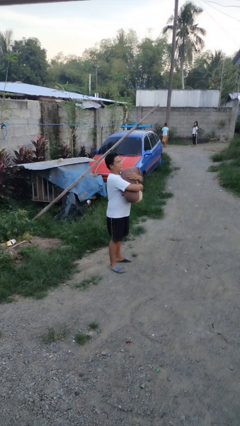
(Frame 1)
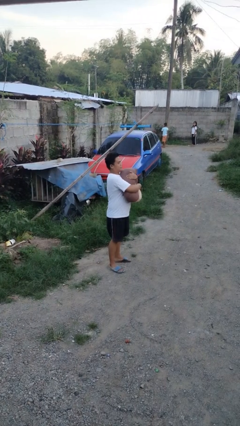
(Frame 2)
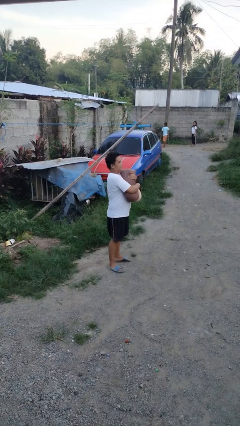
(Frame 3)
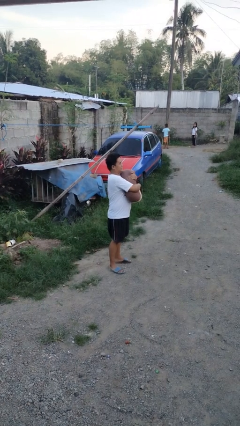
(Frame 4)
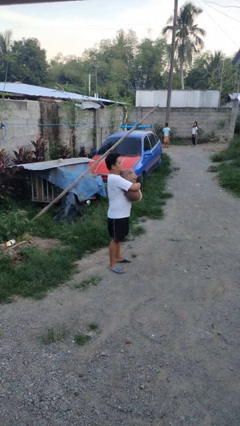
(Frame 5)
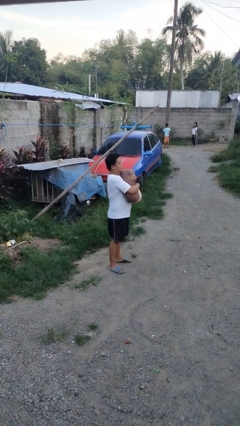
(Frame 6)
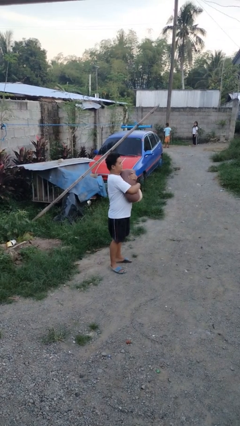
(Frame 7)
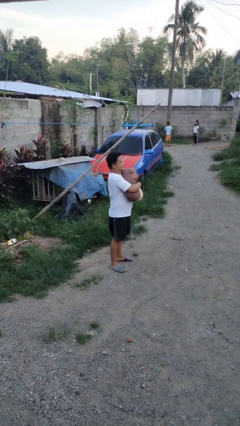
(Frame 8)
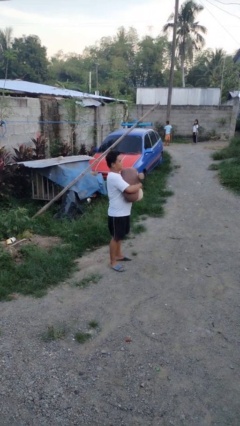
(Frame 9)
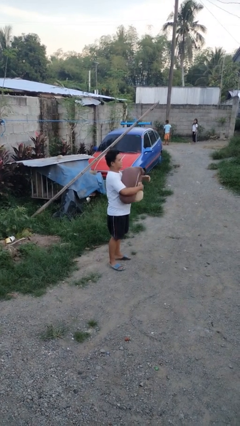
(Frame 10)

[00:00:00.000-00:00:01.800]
person squeezes object

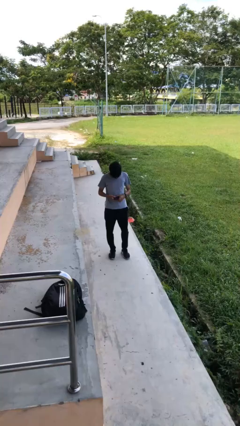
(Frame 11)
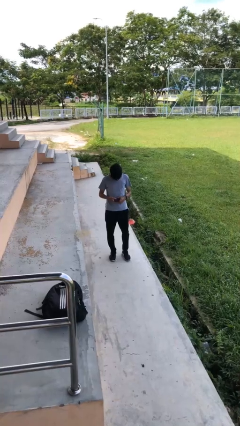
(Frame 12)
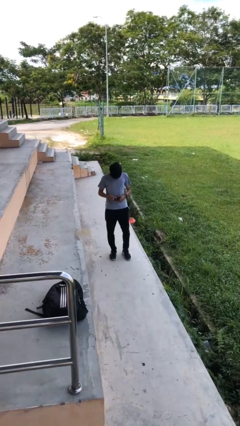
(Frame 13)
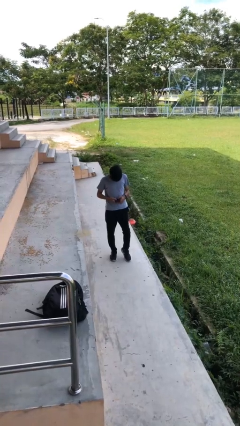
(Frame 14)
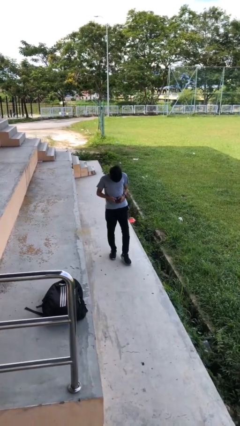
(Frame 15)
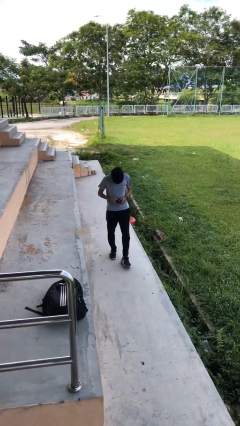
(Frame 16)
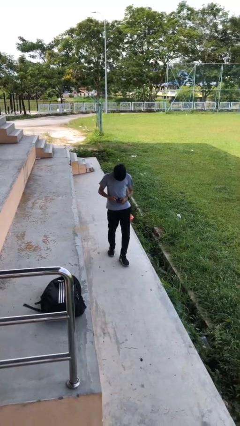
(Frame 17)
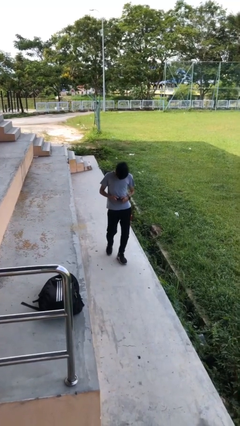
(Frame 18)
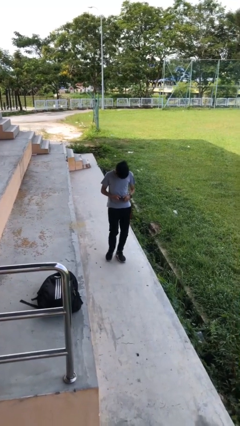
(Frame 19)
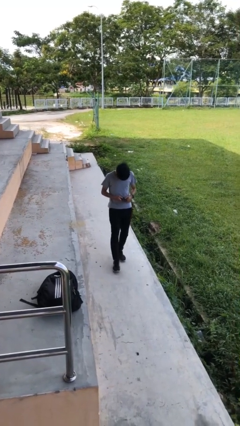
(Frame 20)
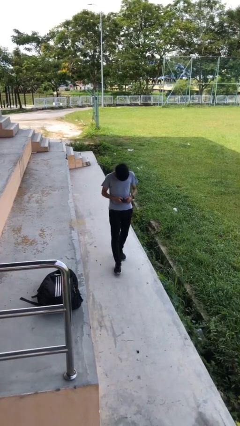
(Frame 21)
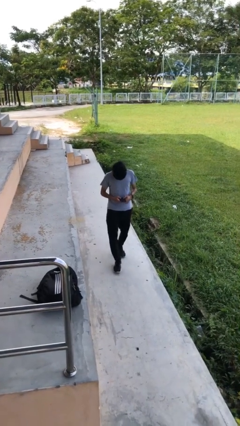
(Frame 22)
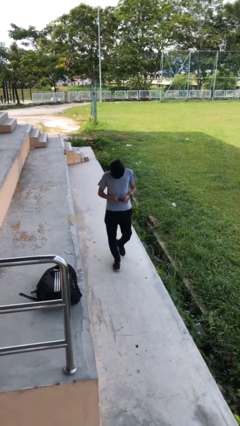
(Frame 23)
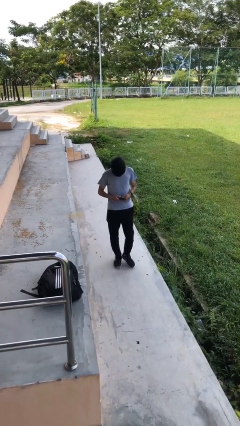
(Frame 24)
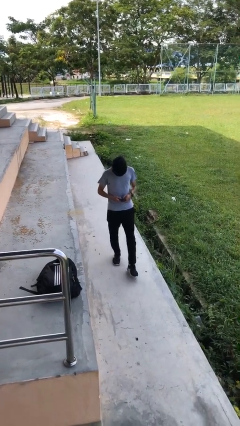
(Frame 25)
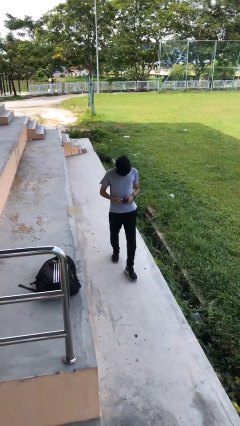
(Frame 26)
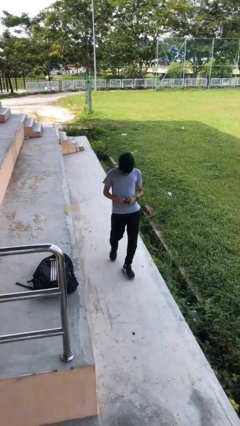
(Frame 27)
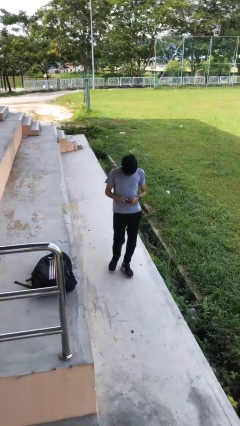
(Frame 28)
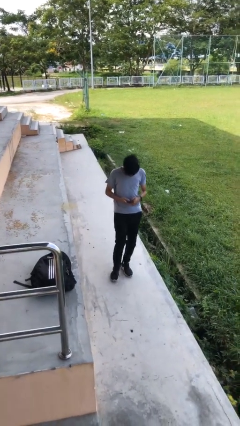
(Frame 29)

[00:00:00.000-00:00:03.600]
person texts on phone

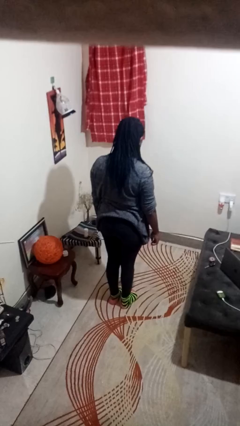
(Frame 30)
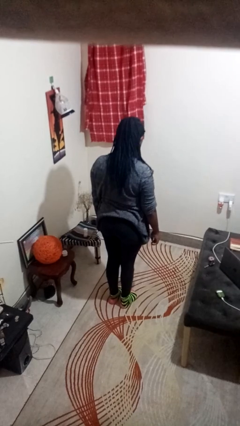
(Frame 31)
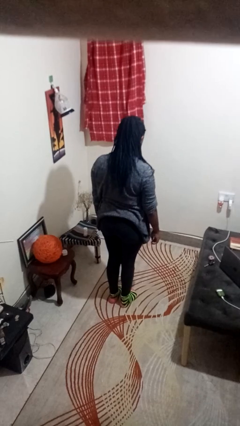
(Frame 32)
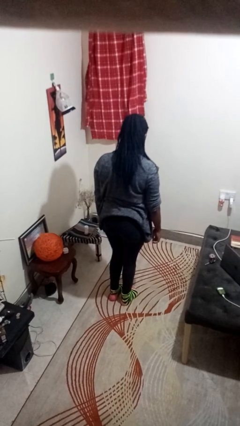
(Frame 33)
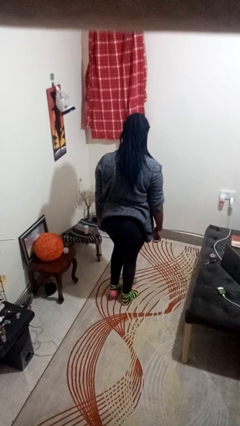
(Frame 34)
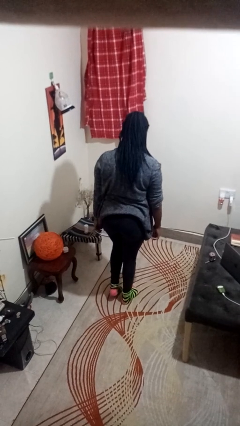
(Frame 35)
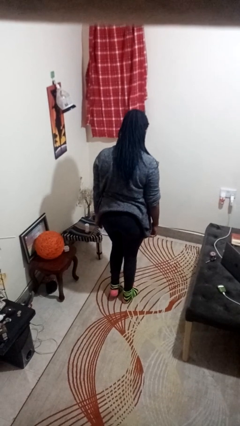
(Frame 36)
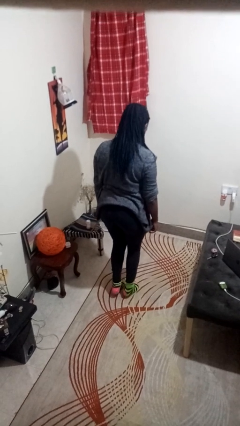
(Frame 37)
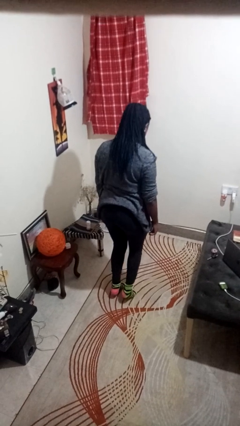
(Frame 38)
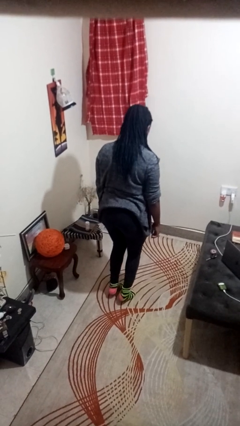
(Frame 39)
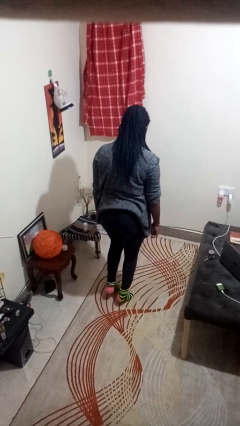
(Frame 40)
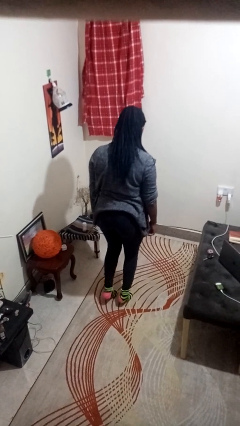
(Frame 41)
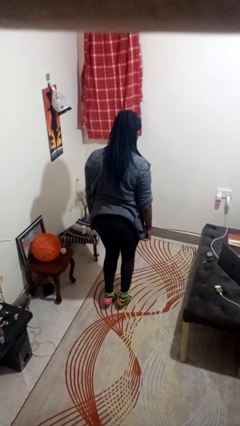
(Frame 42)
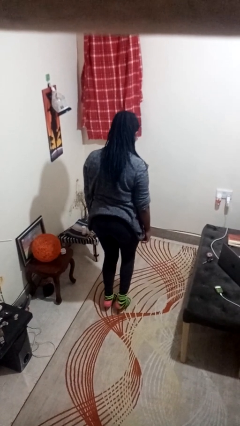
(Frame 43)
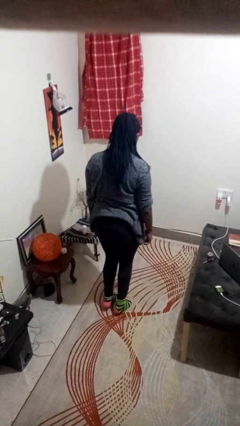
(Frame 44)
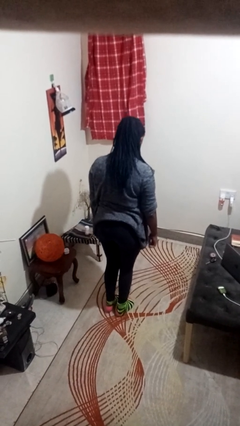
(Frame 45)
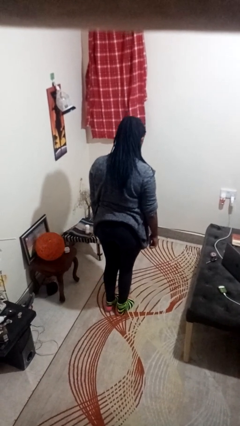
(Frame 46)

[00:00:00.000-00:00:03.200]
person walks tiptoe

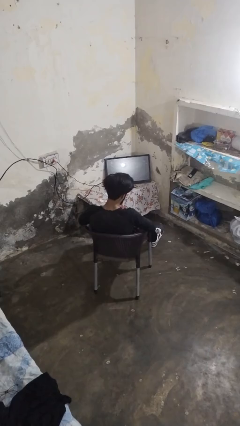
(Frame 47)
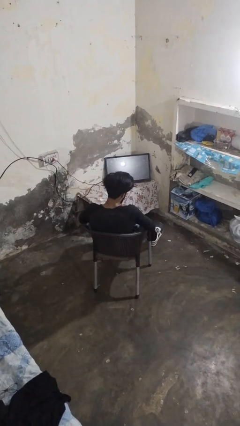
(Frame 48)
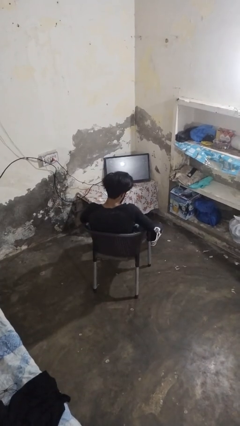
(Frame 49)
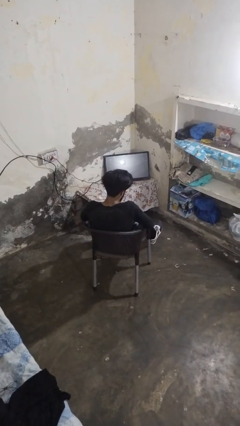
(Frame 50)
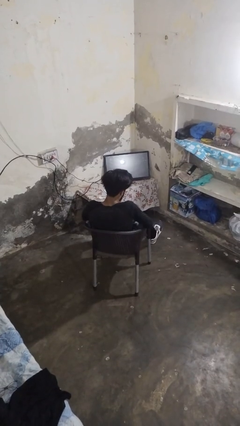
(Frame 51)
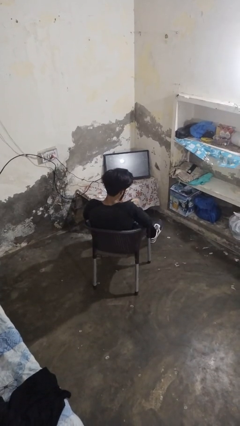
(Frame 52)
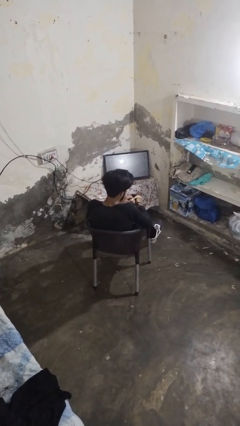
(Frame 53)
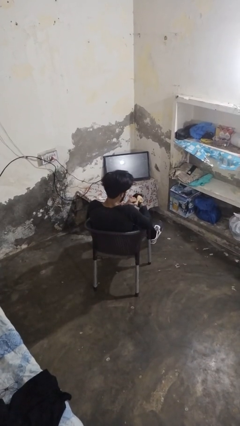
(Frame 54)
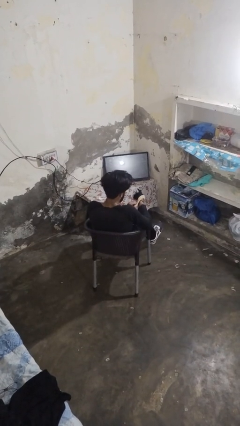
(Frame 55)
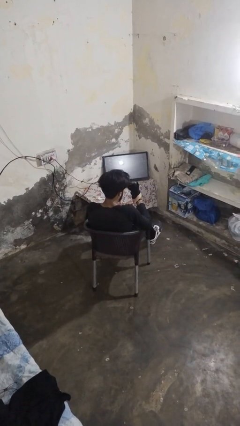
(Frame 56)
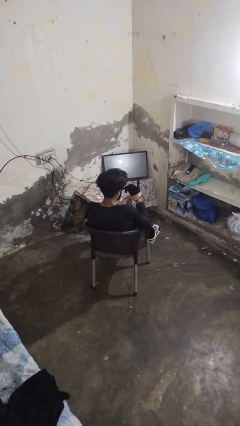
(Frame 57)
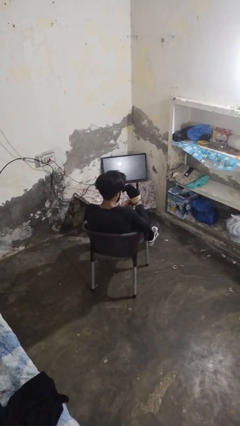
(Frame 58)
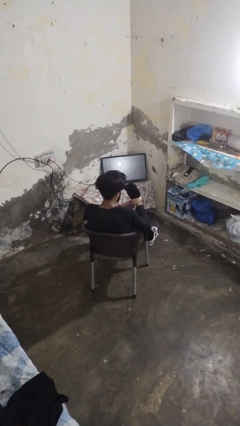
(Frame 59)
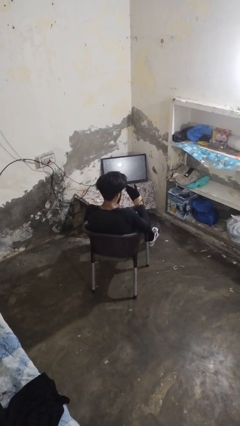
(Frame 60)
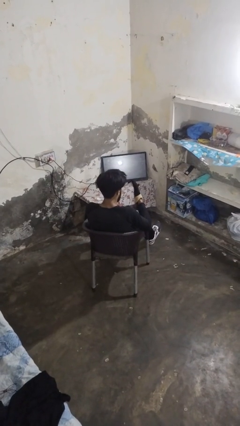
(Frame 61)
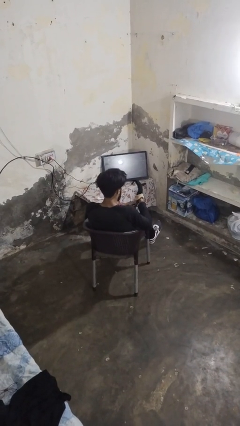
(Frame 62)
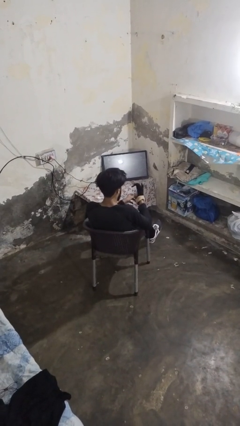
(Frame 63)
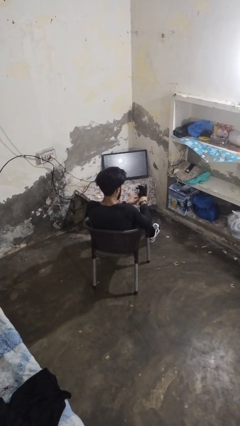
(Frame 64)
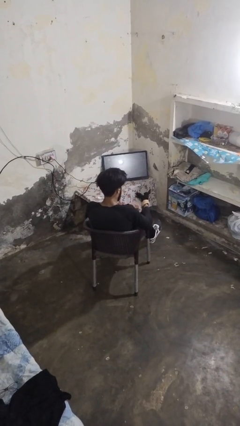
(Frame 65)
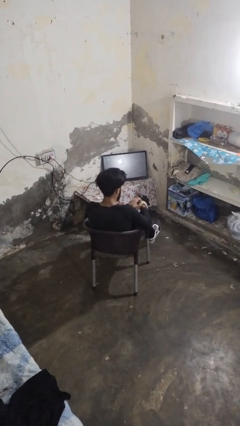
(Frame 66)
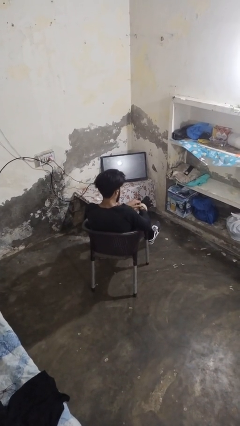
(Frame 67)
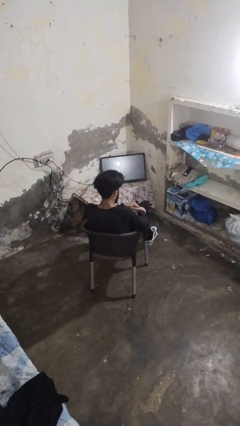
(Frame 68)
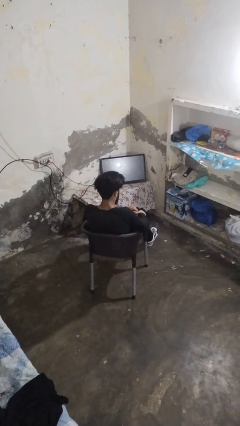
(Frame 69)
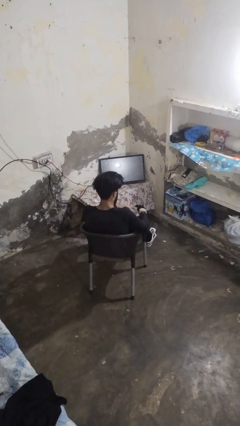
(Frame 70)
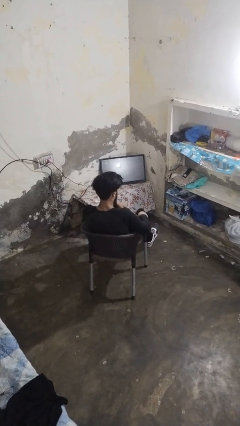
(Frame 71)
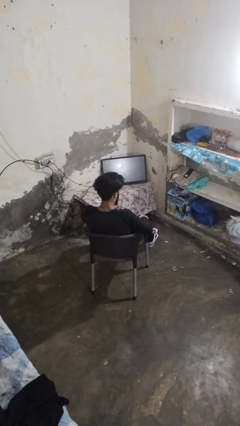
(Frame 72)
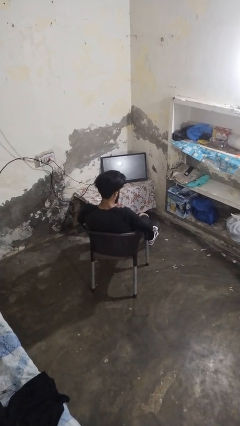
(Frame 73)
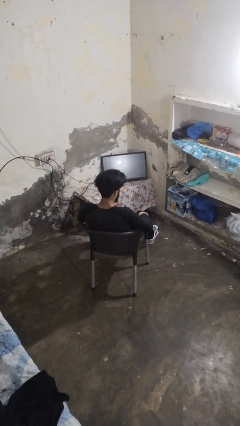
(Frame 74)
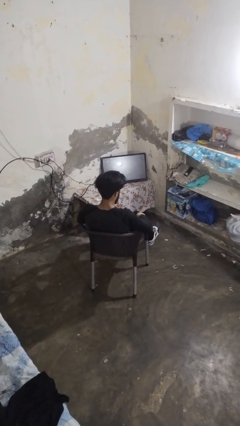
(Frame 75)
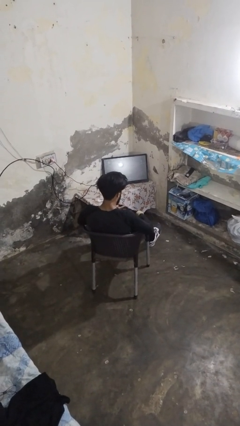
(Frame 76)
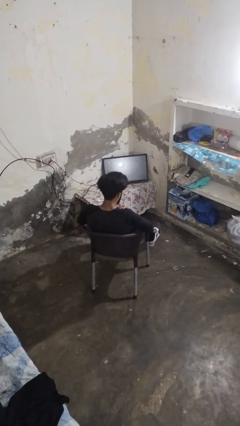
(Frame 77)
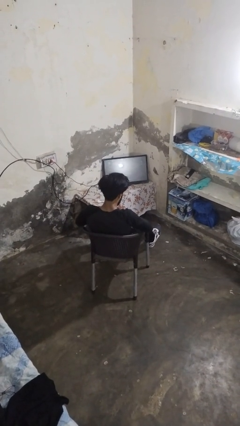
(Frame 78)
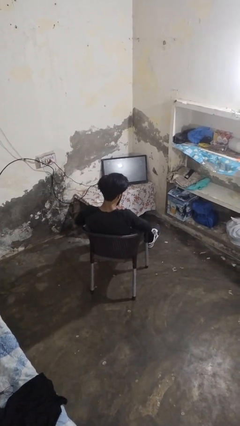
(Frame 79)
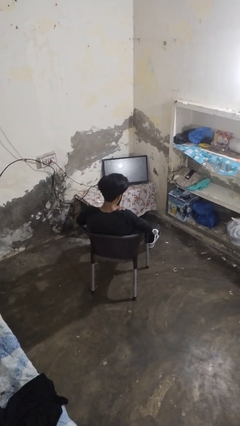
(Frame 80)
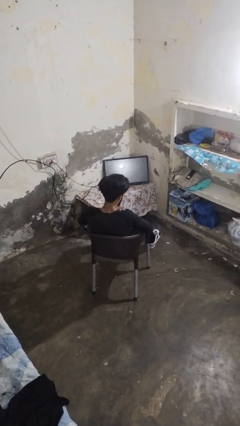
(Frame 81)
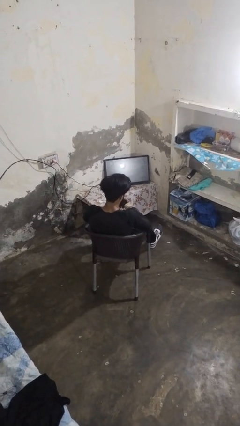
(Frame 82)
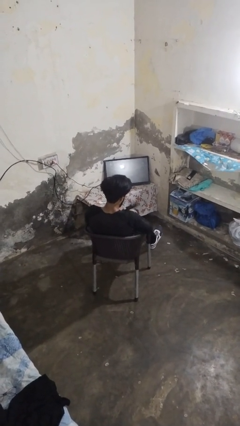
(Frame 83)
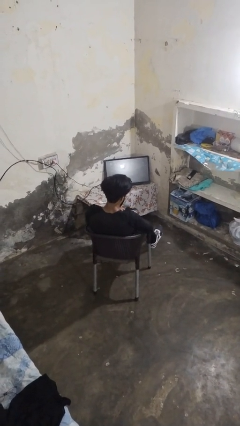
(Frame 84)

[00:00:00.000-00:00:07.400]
person puts on gloves

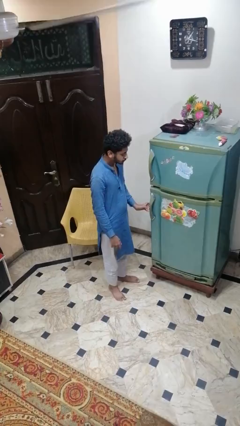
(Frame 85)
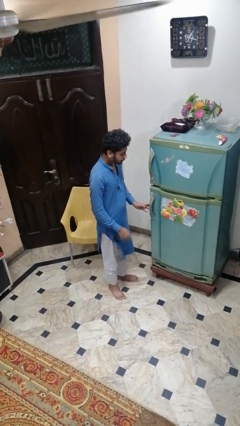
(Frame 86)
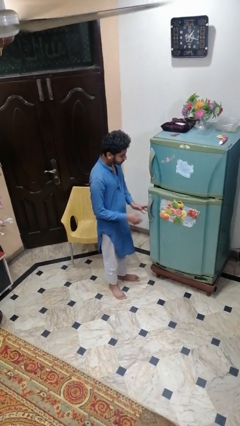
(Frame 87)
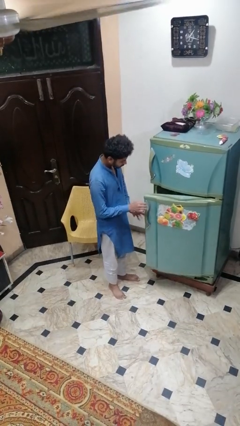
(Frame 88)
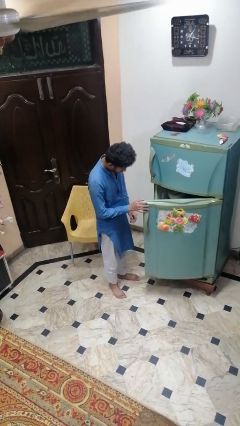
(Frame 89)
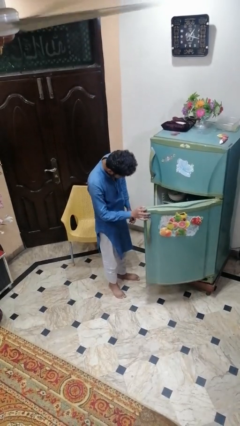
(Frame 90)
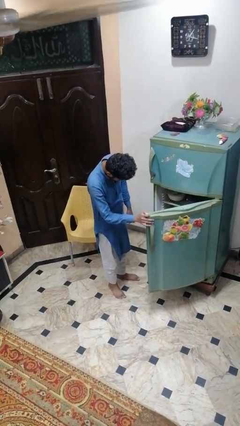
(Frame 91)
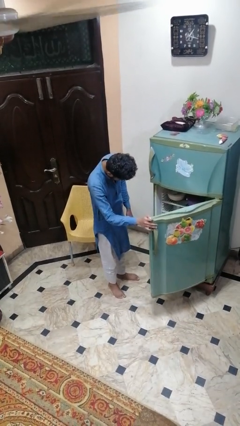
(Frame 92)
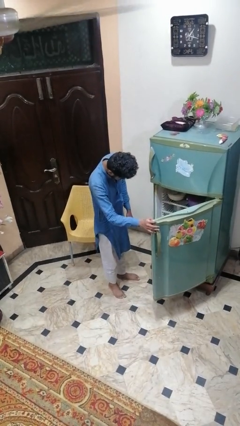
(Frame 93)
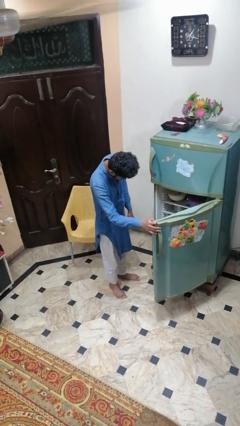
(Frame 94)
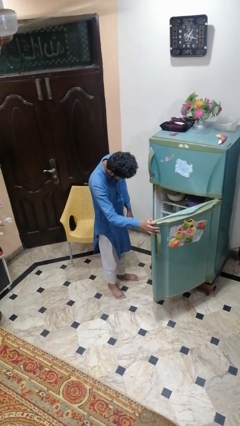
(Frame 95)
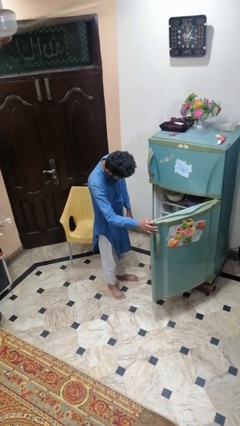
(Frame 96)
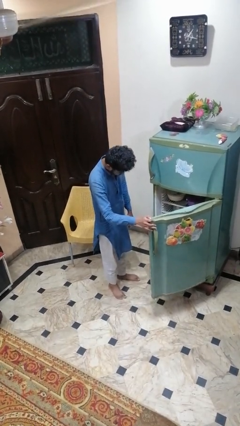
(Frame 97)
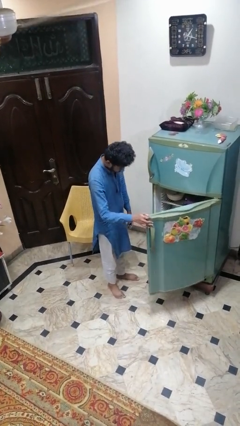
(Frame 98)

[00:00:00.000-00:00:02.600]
person opens refrigerator
